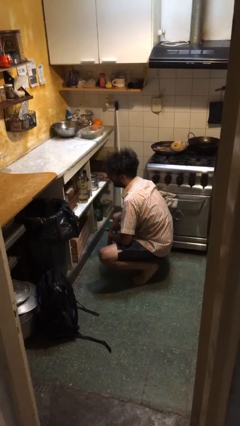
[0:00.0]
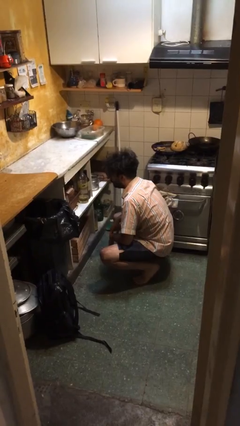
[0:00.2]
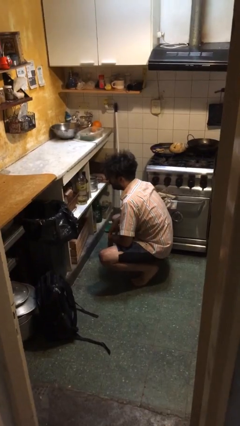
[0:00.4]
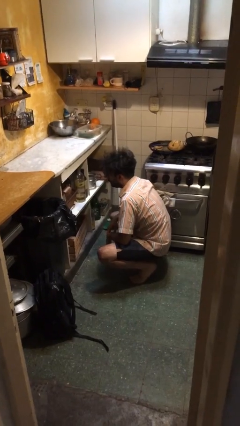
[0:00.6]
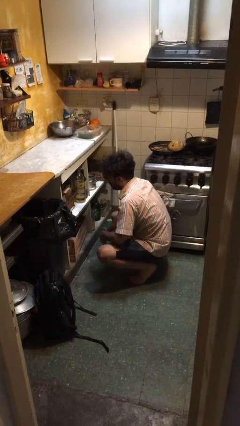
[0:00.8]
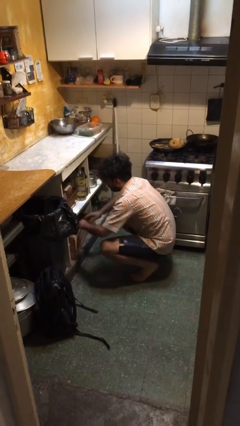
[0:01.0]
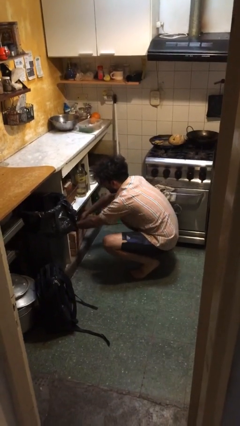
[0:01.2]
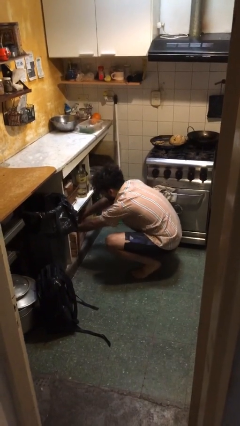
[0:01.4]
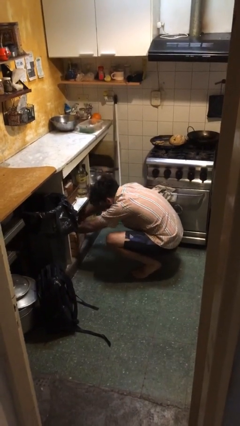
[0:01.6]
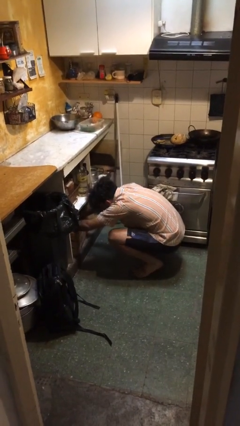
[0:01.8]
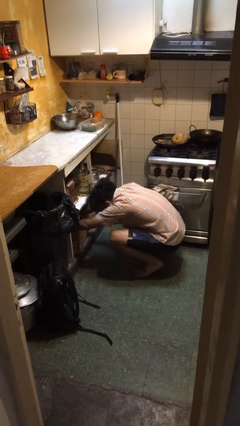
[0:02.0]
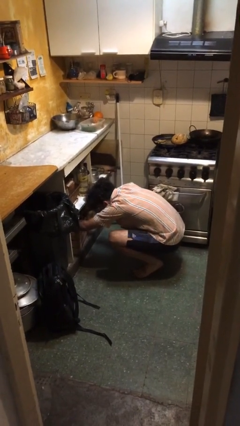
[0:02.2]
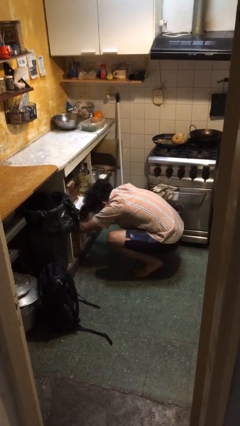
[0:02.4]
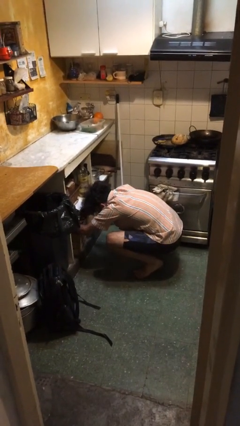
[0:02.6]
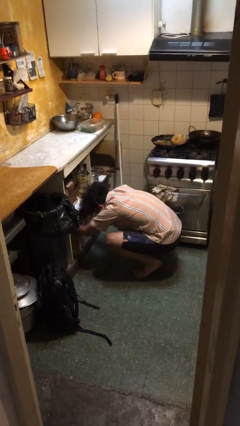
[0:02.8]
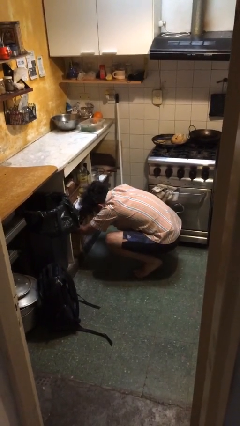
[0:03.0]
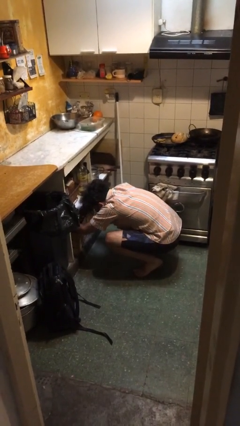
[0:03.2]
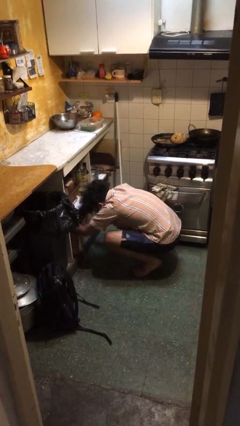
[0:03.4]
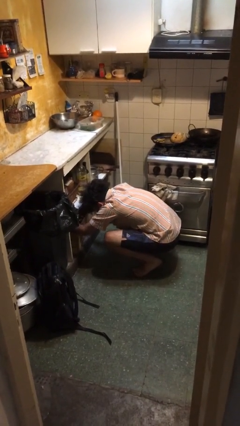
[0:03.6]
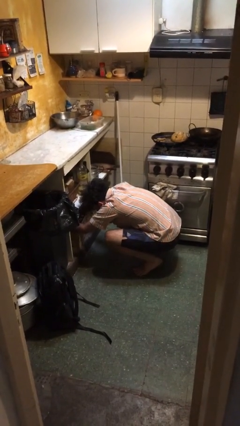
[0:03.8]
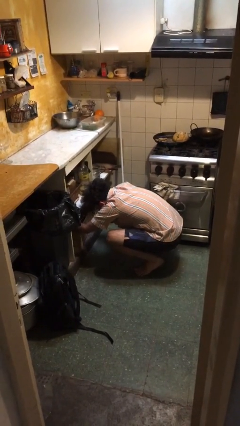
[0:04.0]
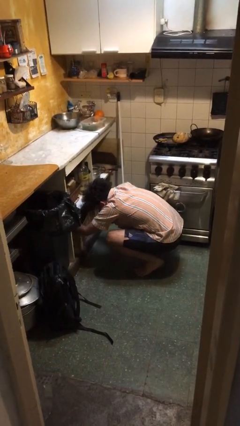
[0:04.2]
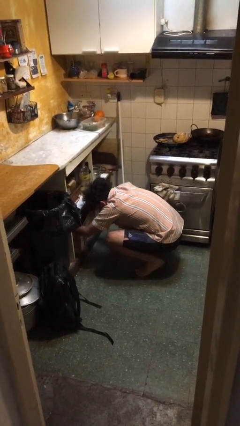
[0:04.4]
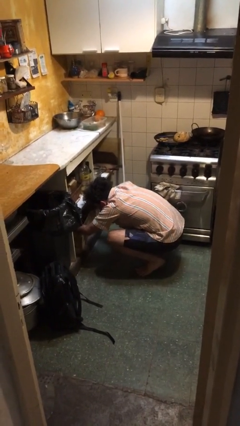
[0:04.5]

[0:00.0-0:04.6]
person searches in cabinet

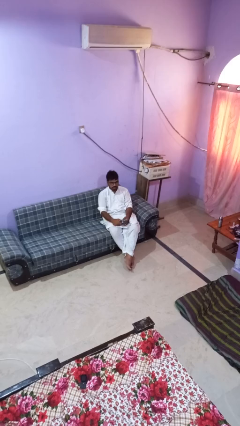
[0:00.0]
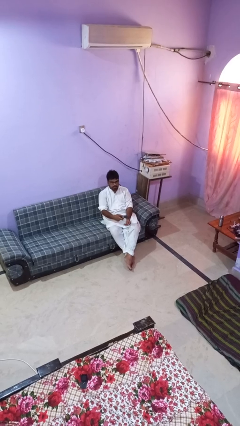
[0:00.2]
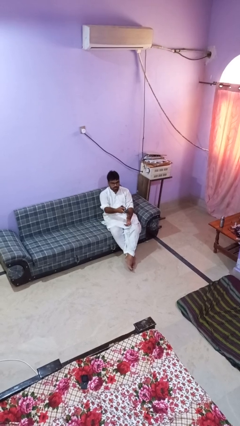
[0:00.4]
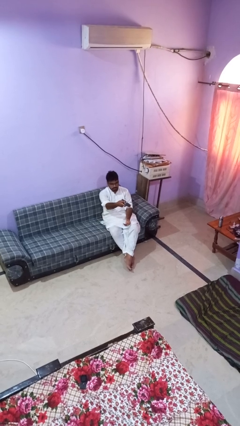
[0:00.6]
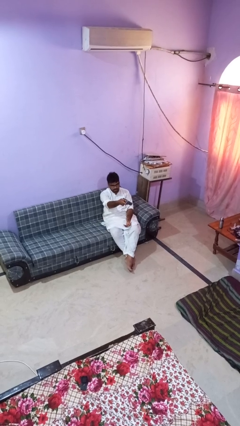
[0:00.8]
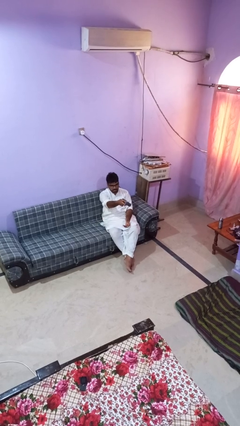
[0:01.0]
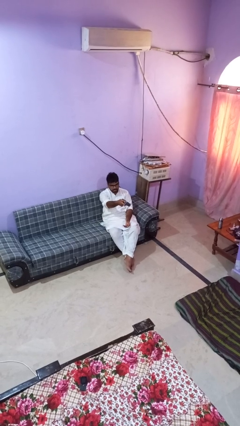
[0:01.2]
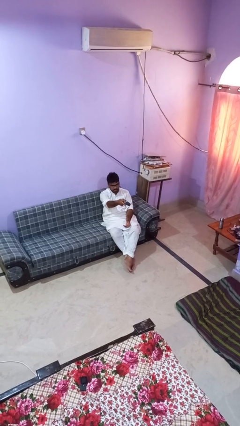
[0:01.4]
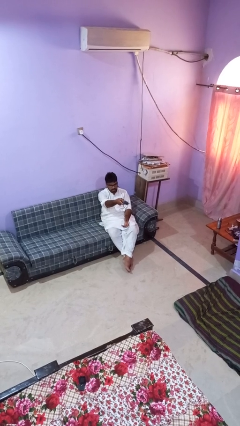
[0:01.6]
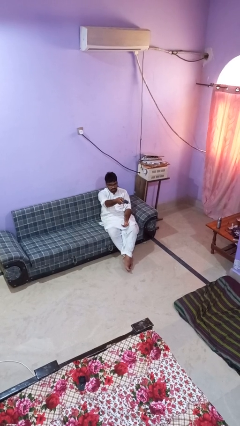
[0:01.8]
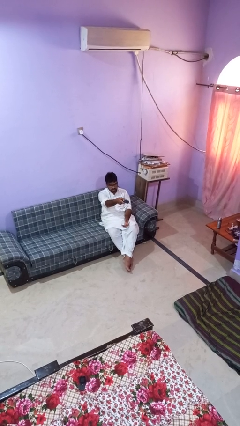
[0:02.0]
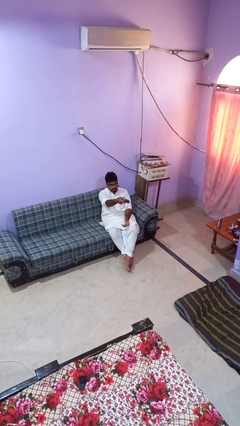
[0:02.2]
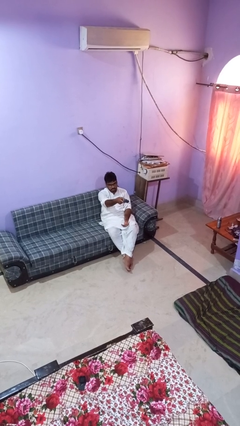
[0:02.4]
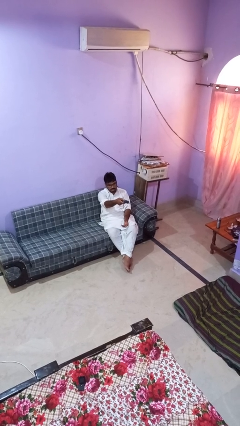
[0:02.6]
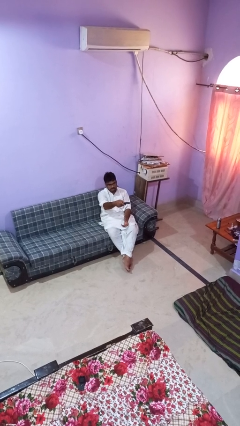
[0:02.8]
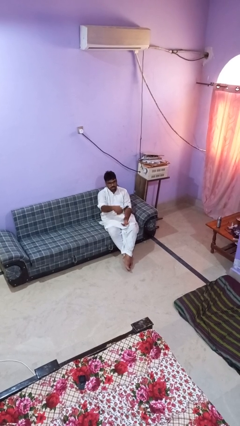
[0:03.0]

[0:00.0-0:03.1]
person uses television remote

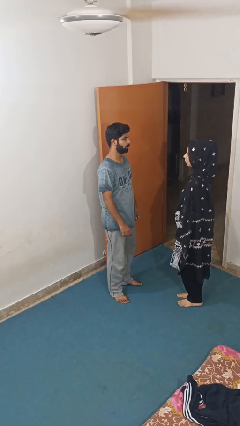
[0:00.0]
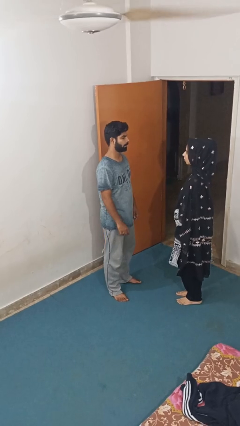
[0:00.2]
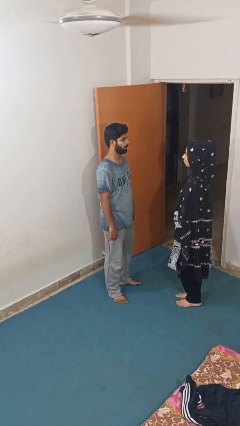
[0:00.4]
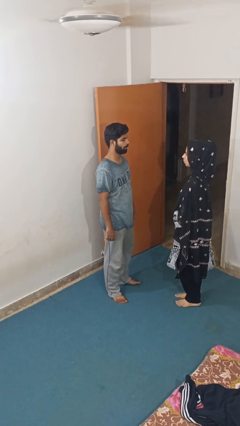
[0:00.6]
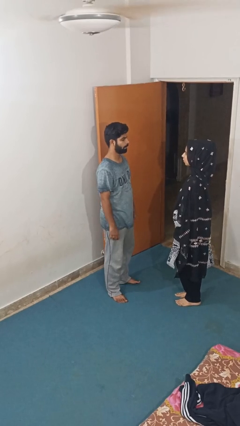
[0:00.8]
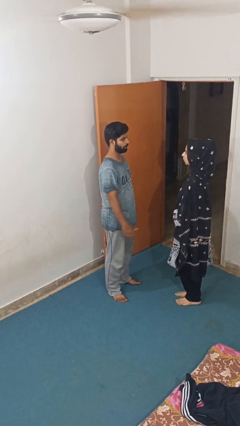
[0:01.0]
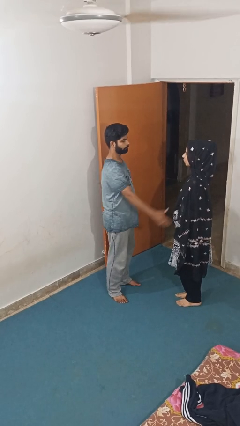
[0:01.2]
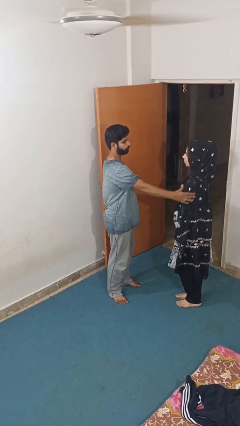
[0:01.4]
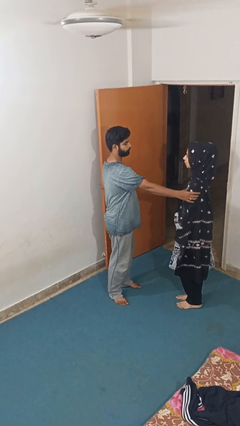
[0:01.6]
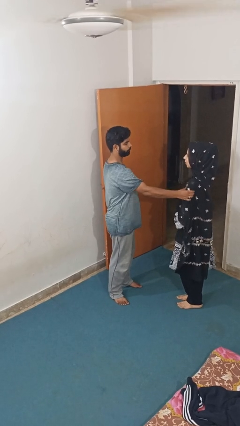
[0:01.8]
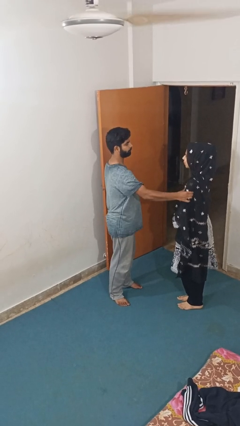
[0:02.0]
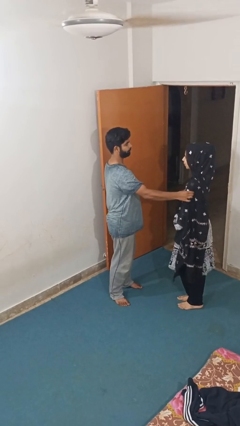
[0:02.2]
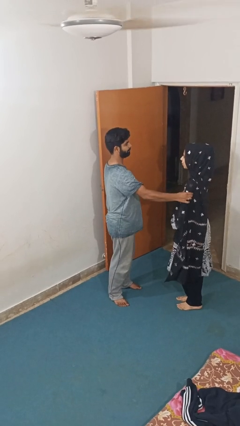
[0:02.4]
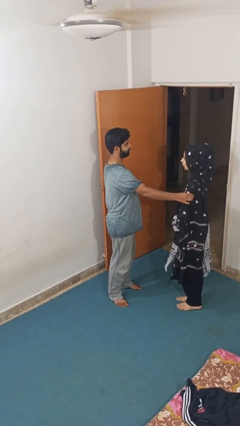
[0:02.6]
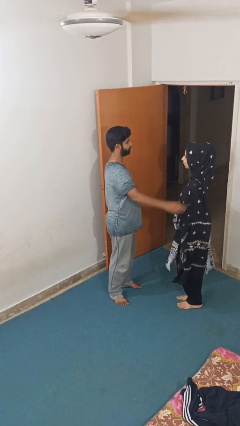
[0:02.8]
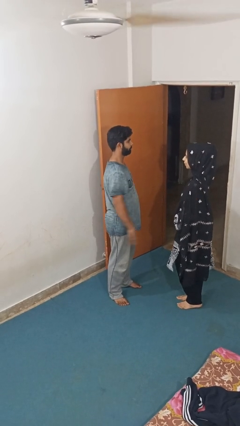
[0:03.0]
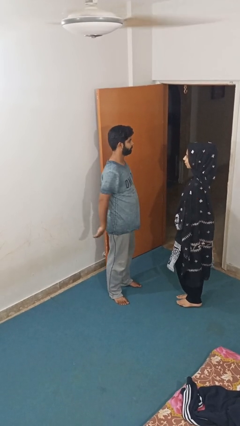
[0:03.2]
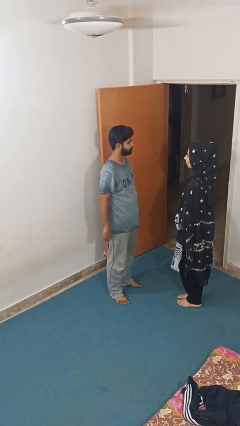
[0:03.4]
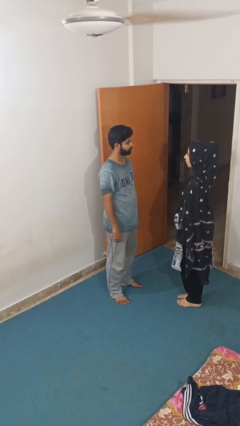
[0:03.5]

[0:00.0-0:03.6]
person grabs person by bicep

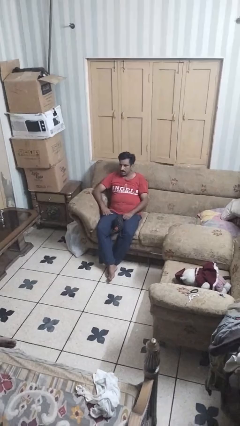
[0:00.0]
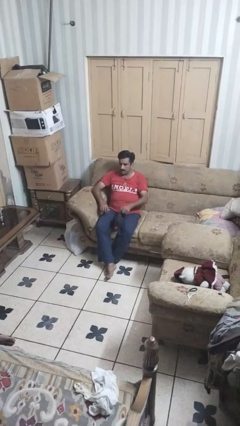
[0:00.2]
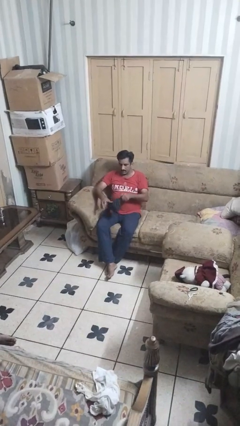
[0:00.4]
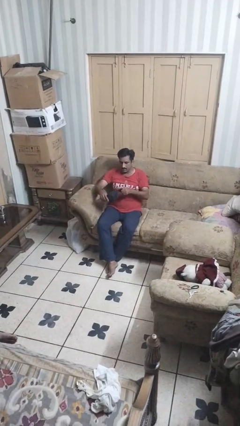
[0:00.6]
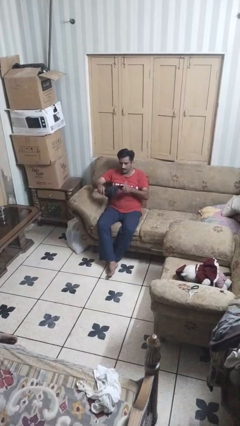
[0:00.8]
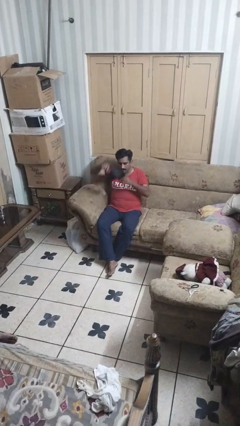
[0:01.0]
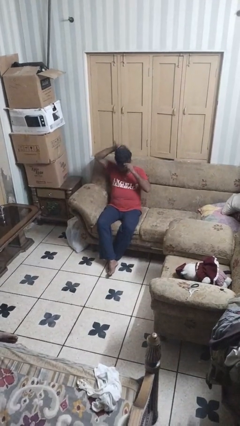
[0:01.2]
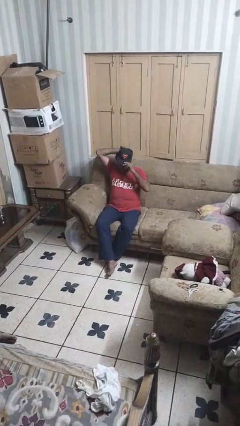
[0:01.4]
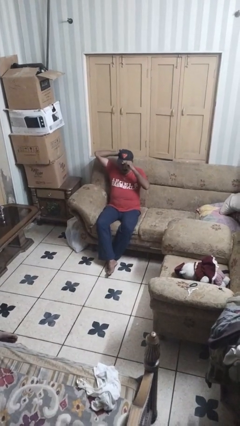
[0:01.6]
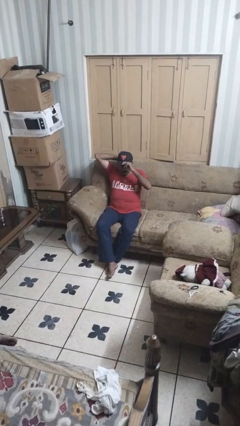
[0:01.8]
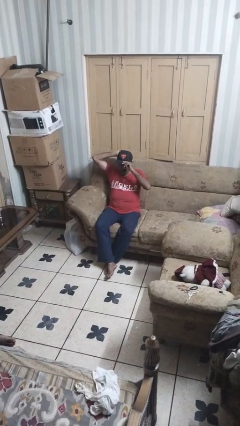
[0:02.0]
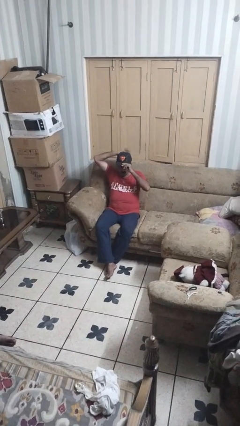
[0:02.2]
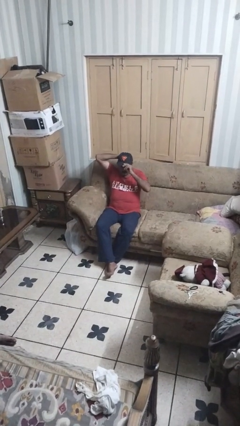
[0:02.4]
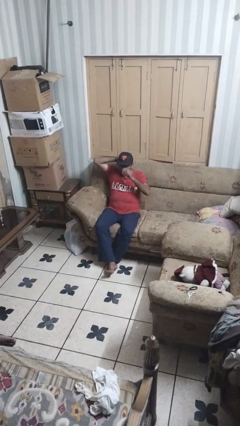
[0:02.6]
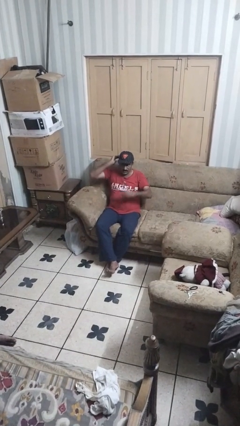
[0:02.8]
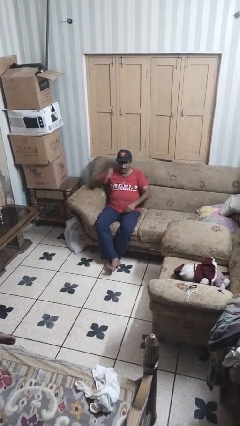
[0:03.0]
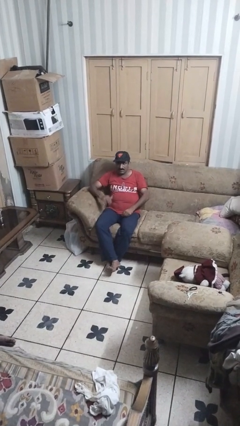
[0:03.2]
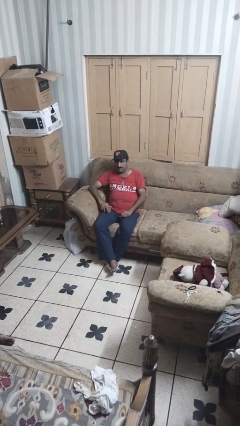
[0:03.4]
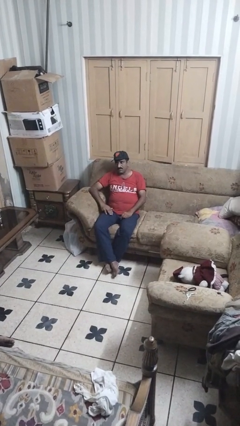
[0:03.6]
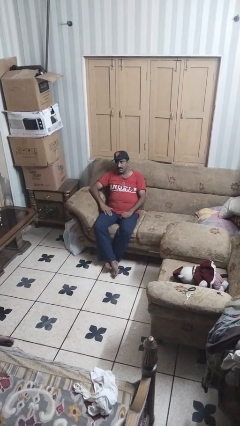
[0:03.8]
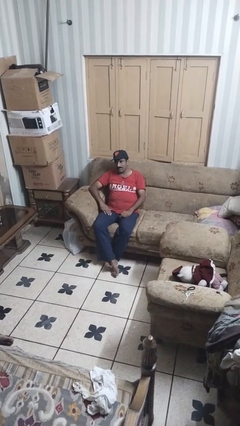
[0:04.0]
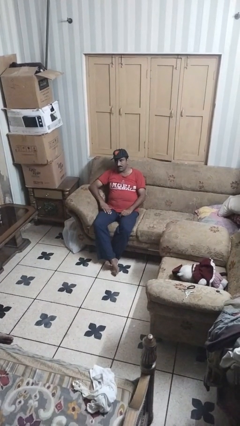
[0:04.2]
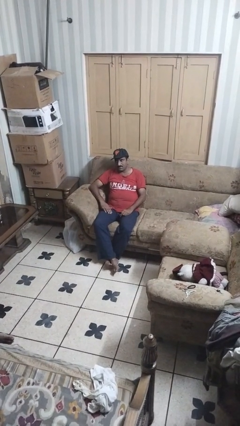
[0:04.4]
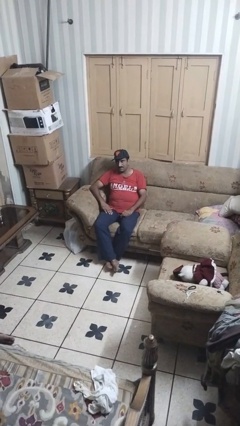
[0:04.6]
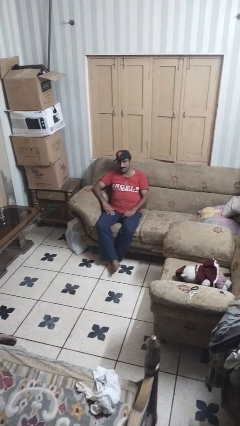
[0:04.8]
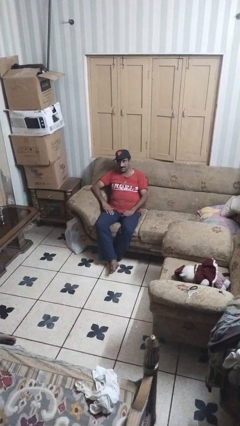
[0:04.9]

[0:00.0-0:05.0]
person puts on hat

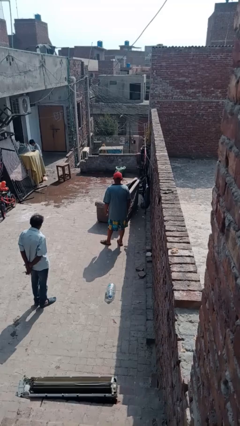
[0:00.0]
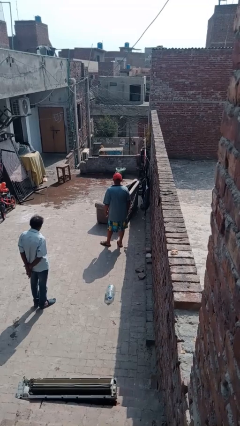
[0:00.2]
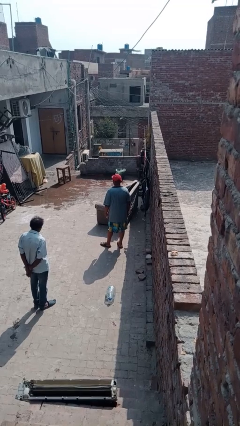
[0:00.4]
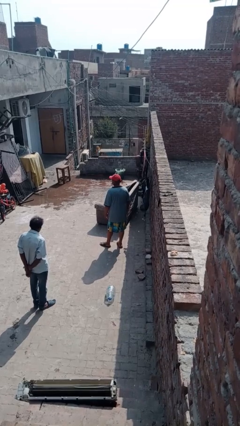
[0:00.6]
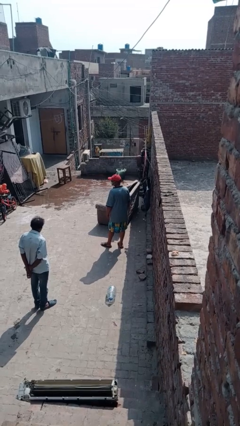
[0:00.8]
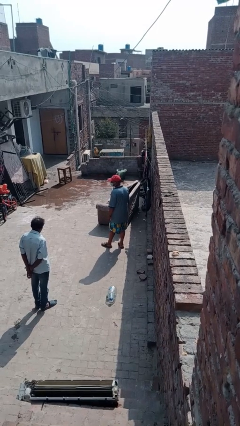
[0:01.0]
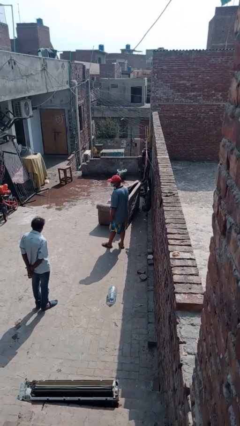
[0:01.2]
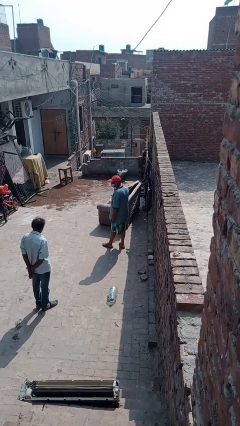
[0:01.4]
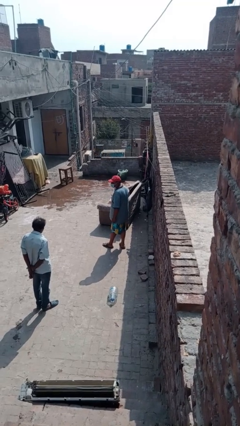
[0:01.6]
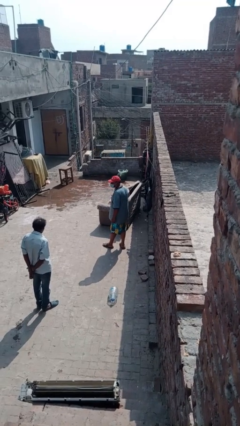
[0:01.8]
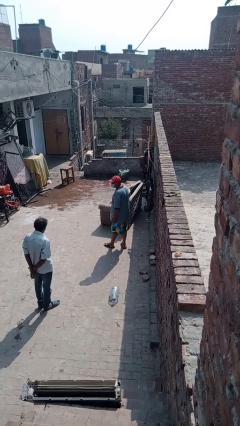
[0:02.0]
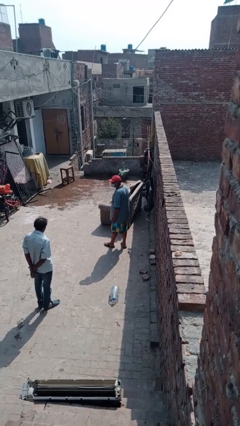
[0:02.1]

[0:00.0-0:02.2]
person looks over shoulder
